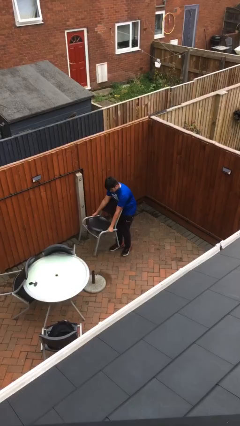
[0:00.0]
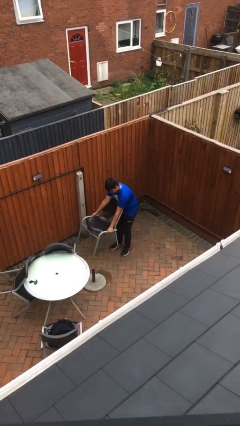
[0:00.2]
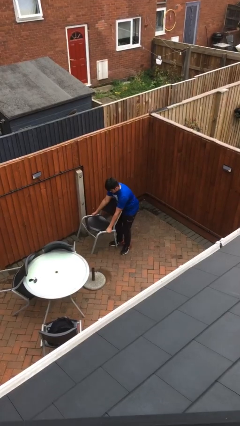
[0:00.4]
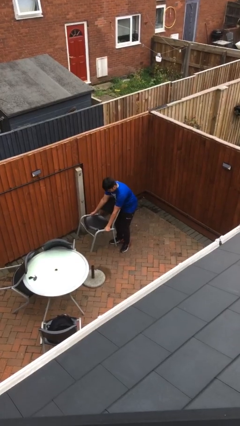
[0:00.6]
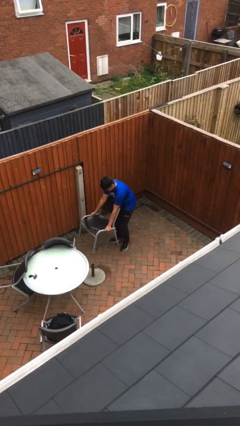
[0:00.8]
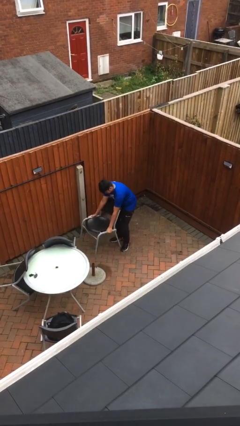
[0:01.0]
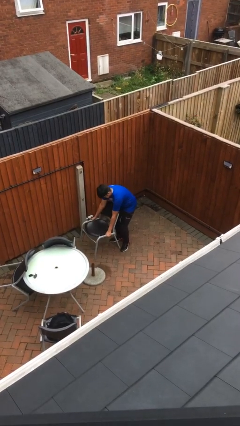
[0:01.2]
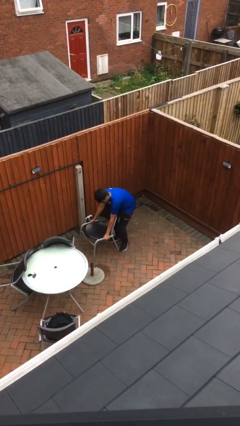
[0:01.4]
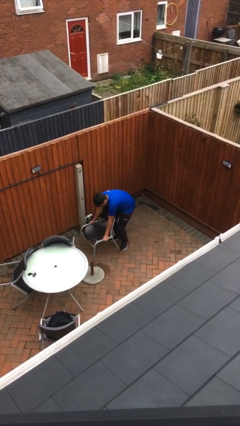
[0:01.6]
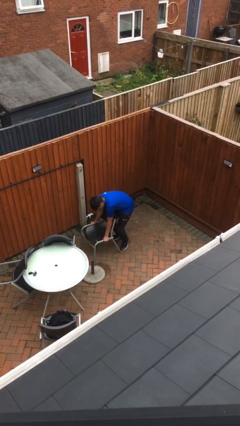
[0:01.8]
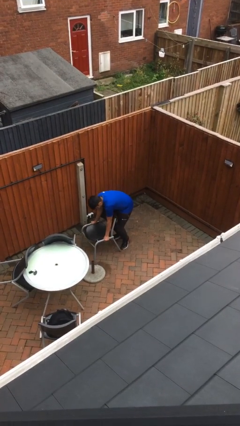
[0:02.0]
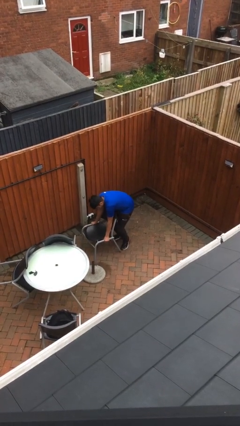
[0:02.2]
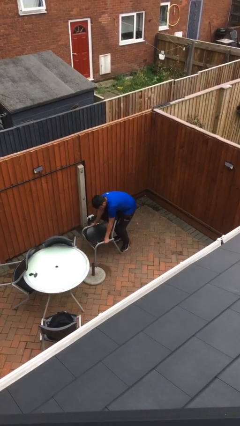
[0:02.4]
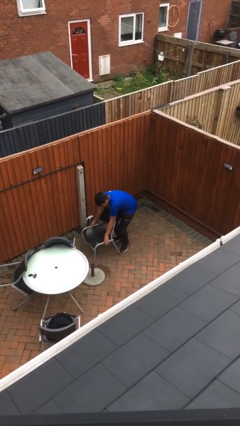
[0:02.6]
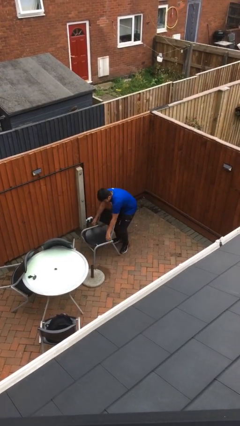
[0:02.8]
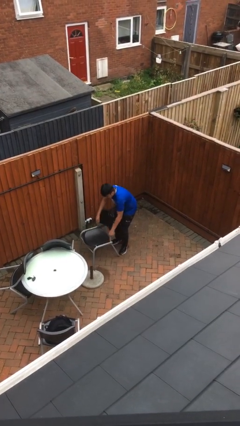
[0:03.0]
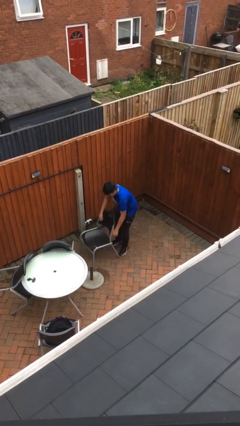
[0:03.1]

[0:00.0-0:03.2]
person puts down object on floor

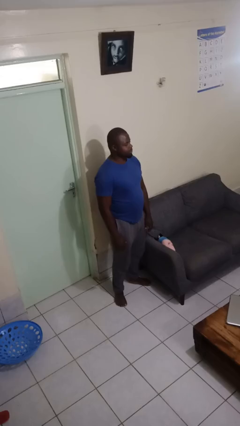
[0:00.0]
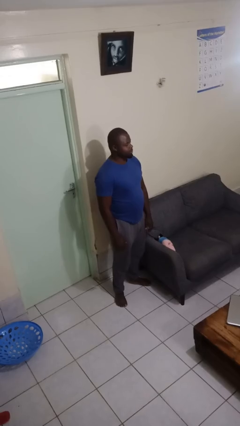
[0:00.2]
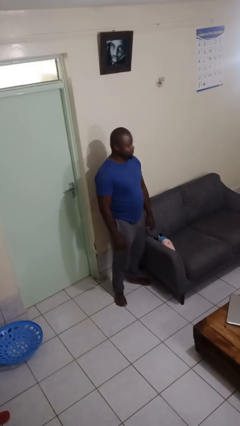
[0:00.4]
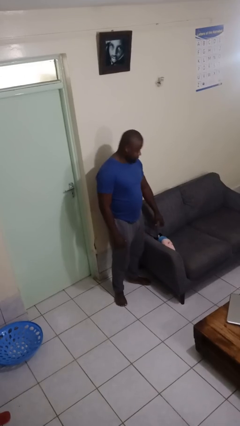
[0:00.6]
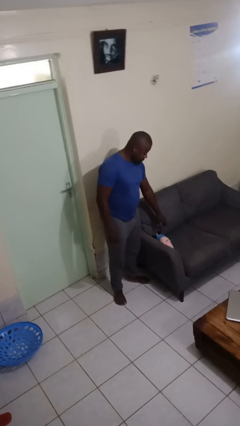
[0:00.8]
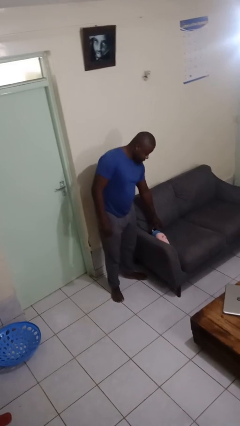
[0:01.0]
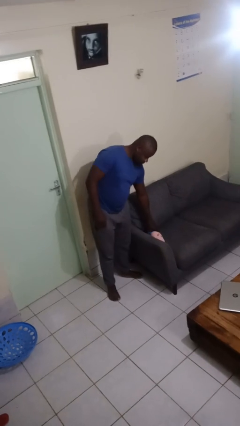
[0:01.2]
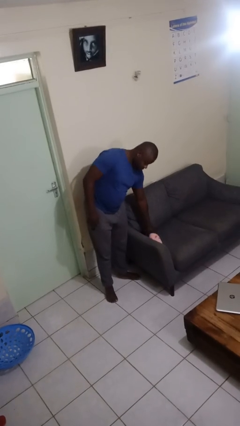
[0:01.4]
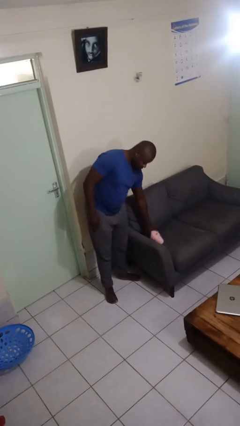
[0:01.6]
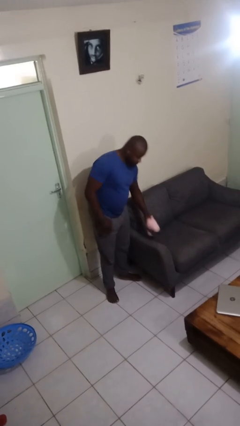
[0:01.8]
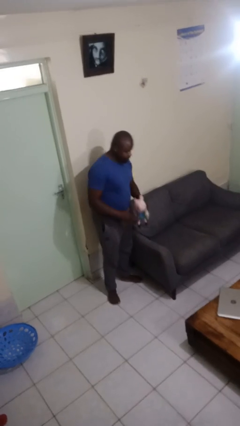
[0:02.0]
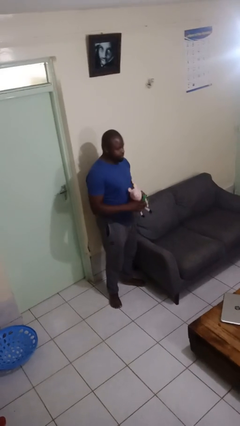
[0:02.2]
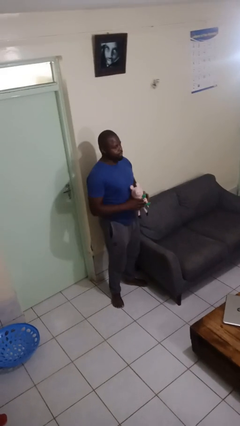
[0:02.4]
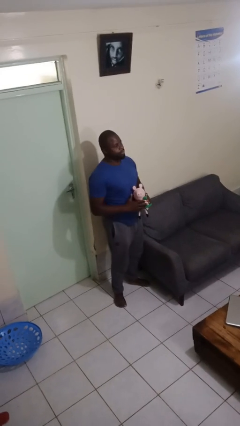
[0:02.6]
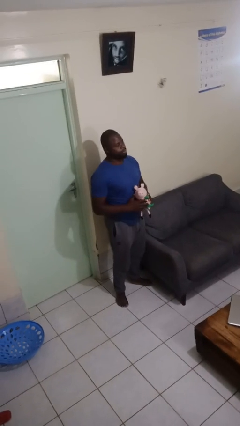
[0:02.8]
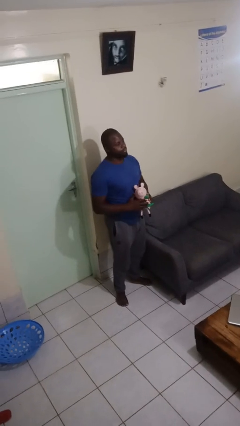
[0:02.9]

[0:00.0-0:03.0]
person picks up object from couch

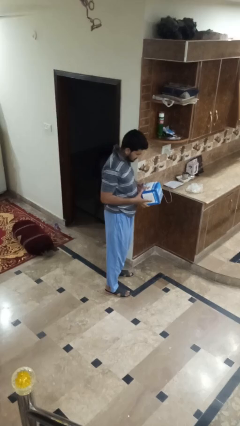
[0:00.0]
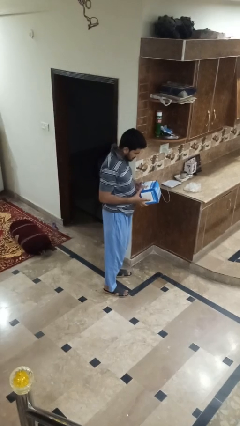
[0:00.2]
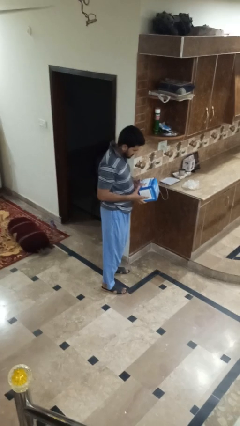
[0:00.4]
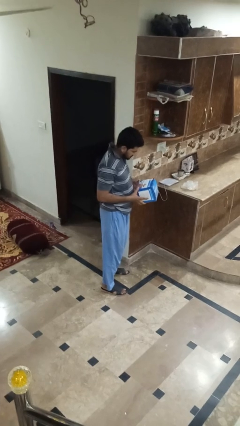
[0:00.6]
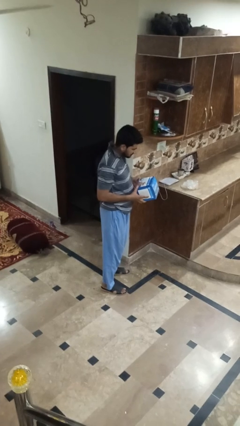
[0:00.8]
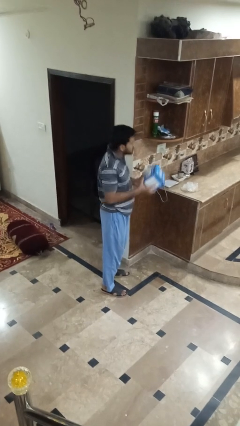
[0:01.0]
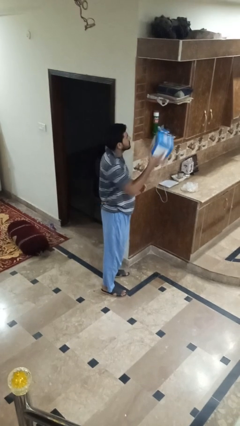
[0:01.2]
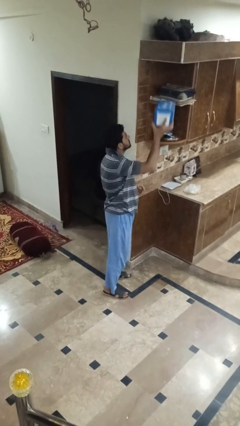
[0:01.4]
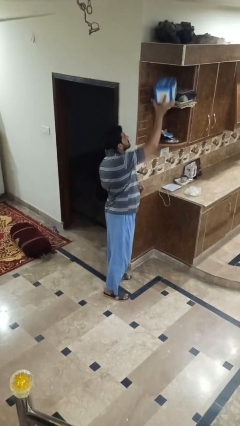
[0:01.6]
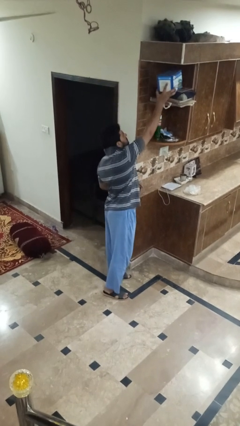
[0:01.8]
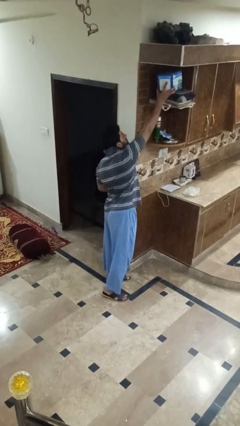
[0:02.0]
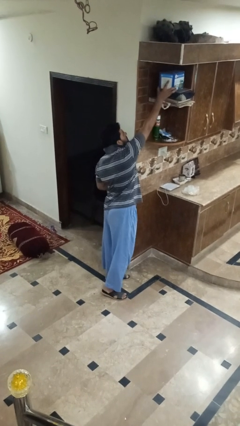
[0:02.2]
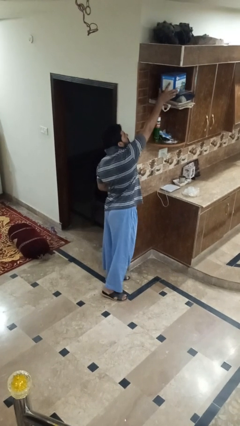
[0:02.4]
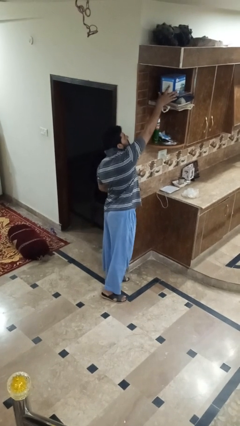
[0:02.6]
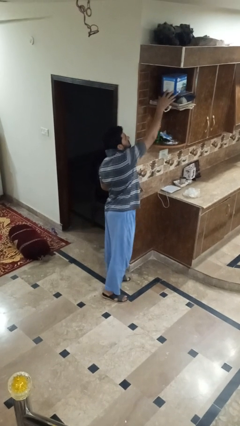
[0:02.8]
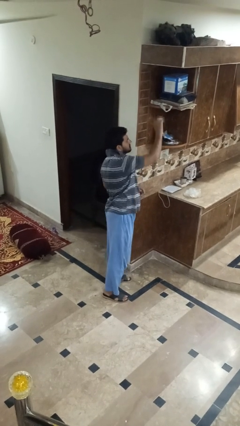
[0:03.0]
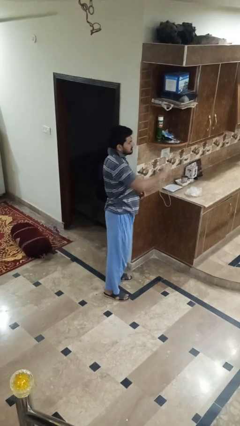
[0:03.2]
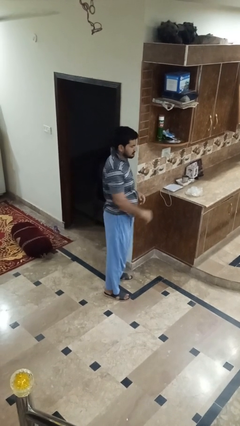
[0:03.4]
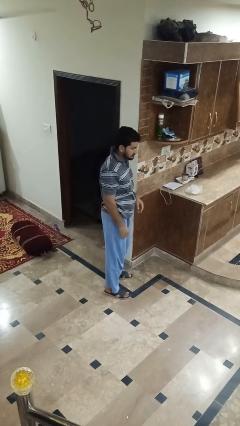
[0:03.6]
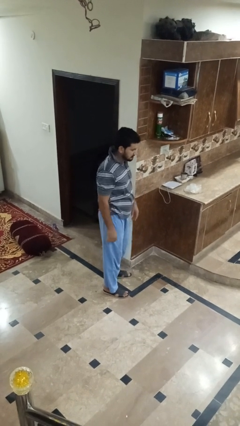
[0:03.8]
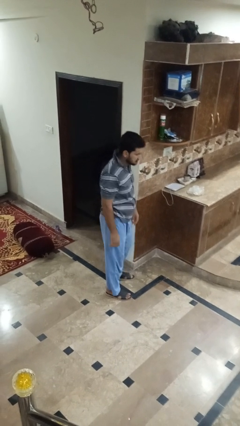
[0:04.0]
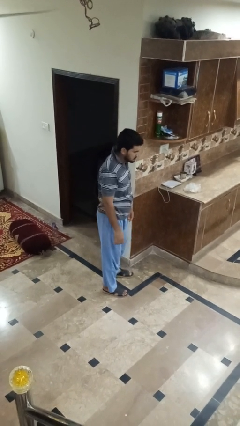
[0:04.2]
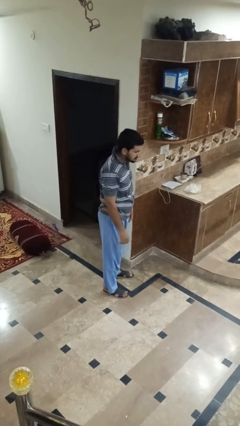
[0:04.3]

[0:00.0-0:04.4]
person picks up object from shelf

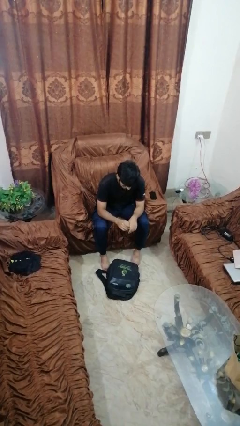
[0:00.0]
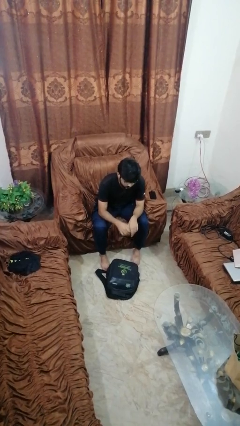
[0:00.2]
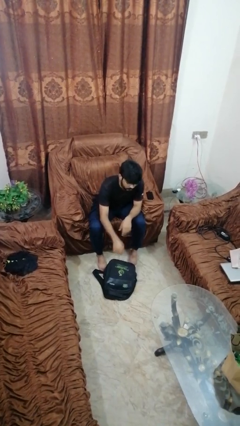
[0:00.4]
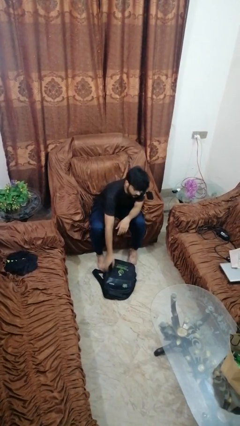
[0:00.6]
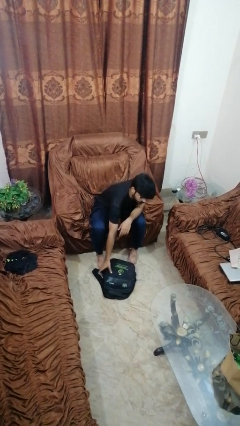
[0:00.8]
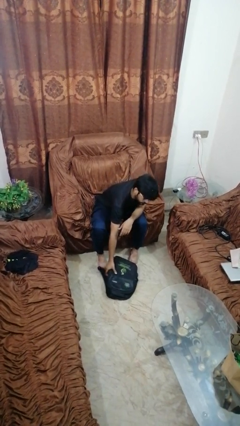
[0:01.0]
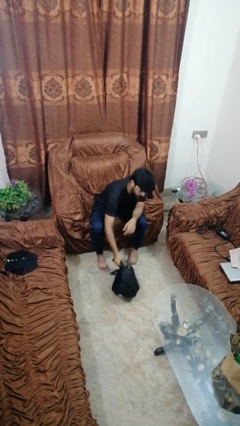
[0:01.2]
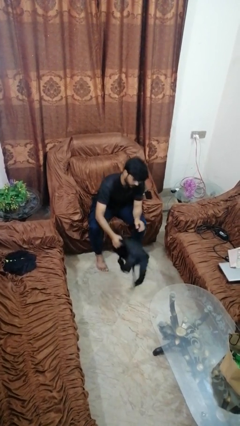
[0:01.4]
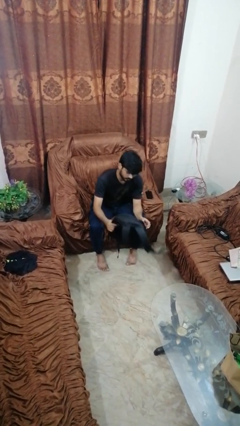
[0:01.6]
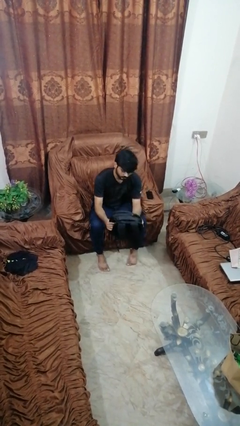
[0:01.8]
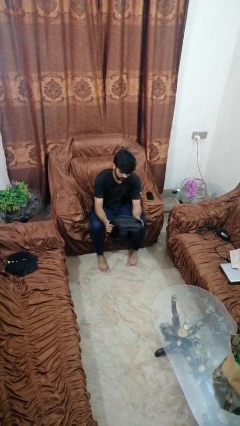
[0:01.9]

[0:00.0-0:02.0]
person picks up object from floor

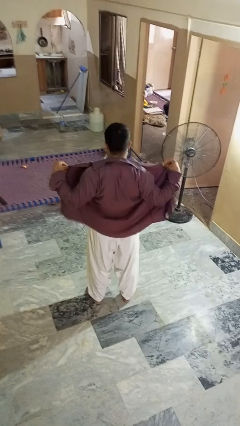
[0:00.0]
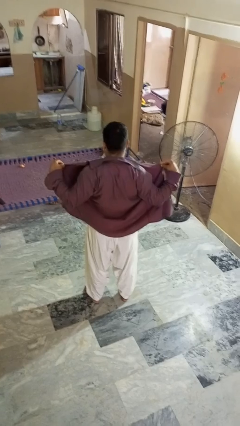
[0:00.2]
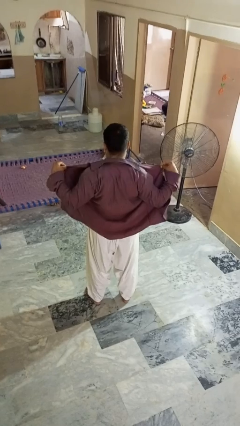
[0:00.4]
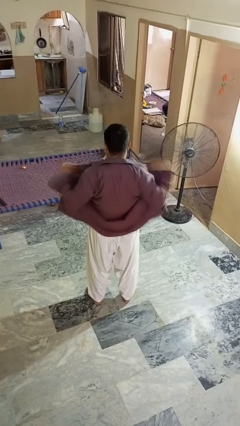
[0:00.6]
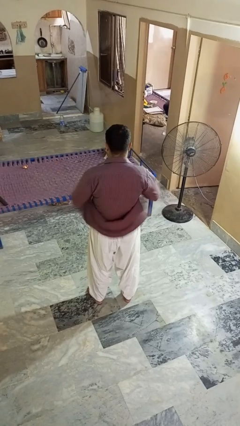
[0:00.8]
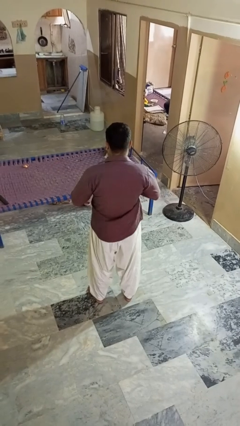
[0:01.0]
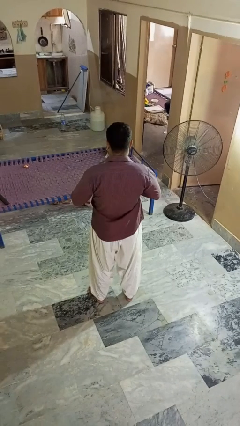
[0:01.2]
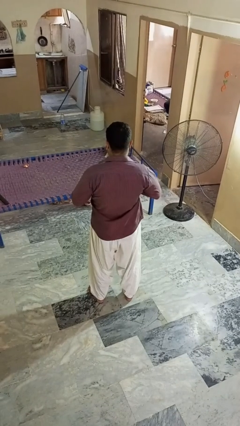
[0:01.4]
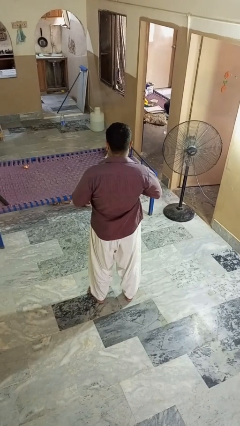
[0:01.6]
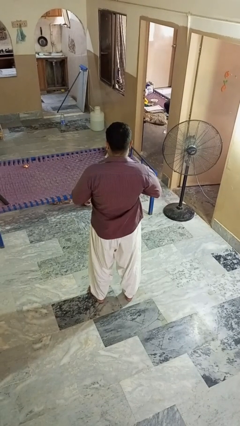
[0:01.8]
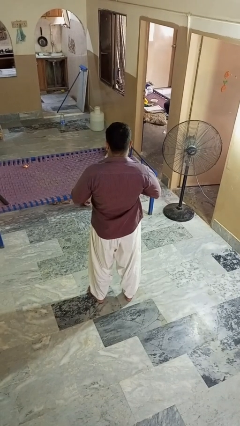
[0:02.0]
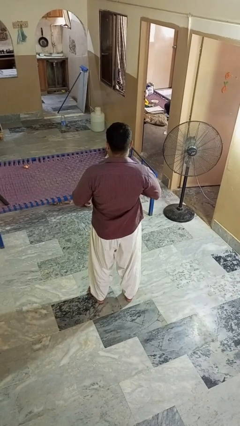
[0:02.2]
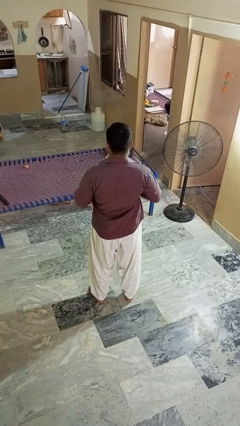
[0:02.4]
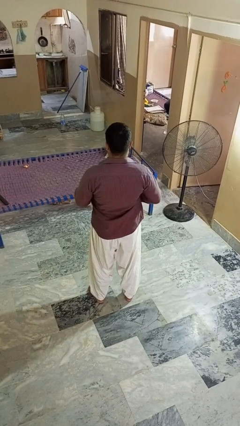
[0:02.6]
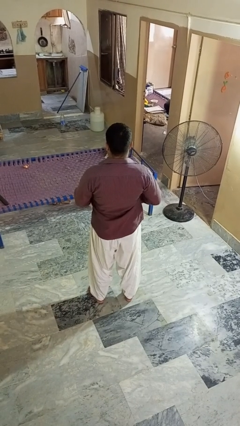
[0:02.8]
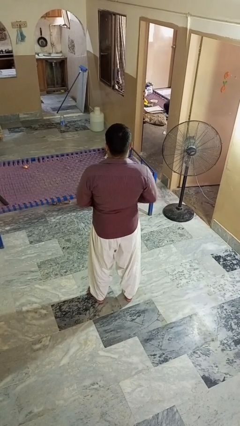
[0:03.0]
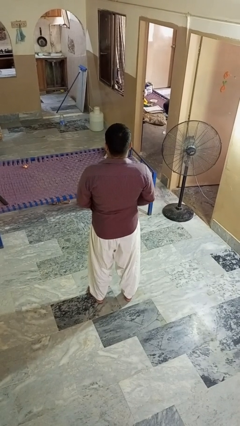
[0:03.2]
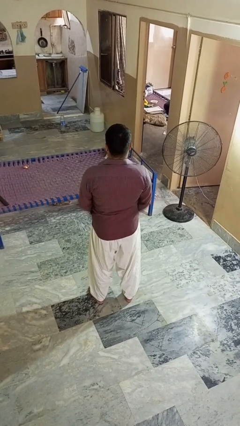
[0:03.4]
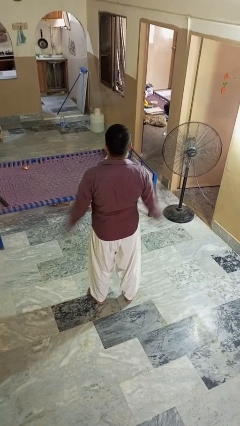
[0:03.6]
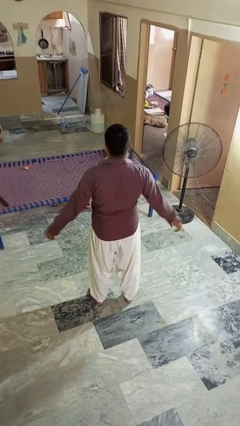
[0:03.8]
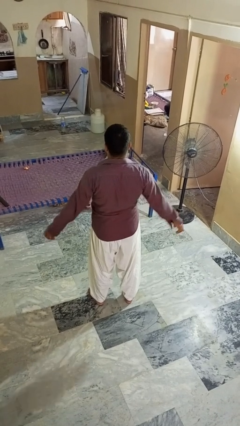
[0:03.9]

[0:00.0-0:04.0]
person buttons shirt

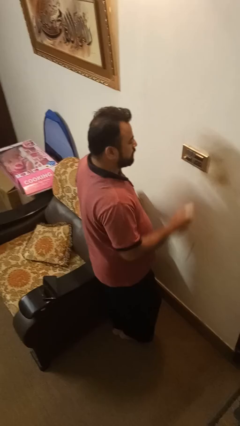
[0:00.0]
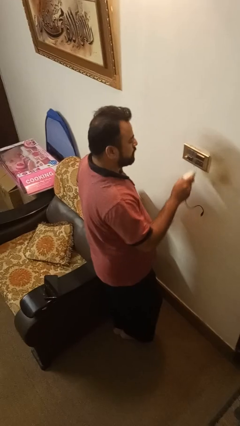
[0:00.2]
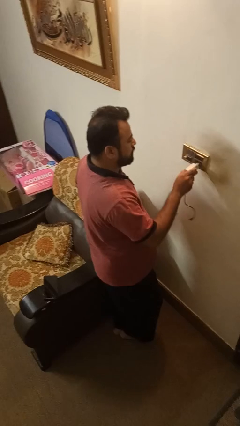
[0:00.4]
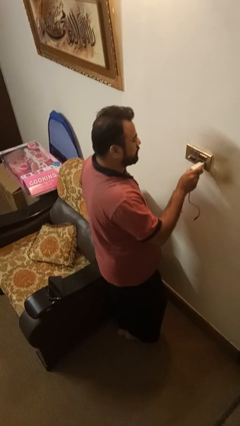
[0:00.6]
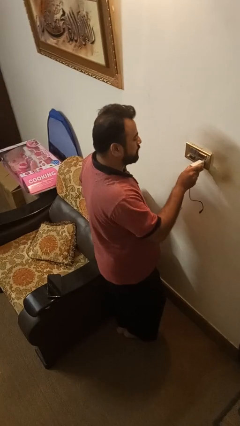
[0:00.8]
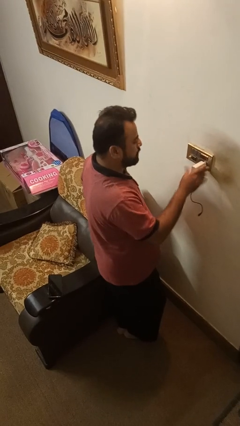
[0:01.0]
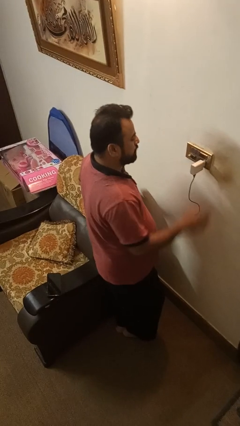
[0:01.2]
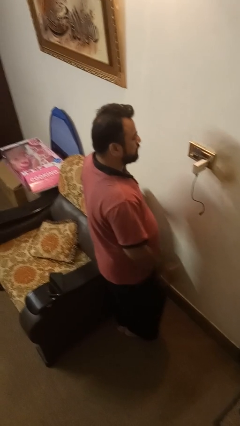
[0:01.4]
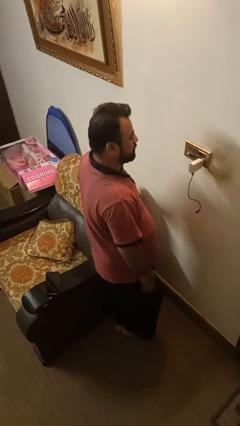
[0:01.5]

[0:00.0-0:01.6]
person plugs into electrical socket
